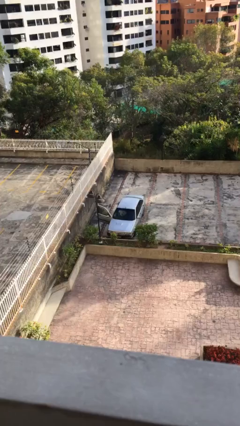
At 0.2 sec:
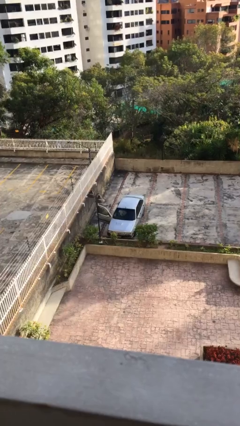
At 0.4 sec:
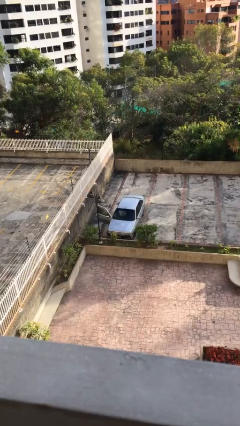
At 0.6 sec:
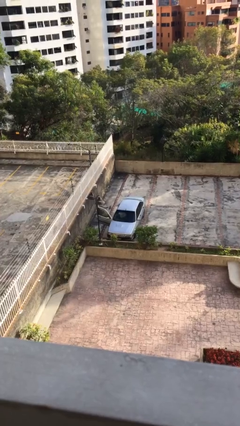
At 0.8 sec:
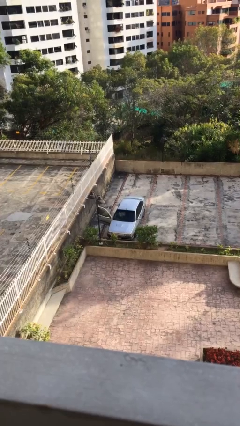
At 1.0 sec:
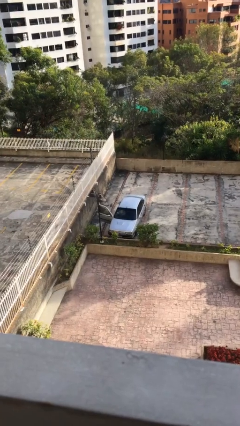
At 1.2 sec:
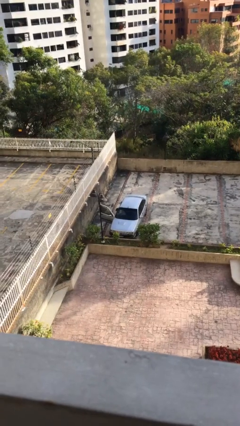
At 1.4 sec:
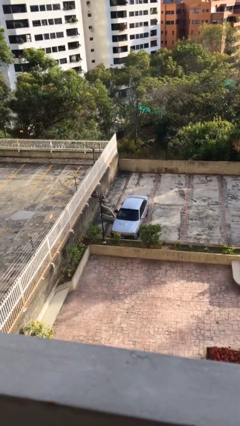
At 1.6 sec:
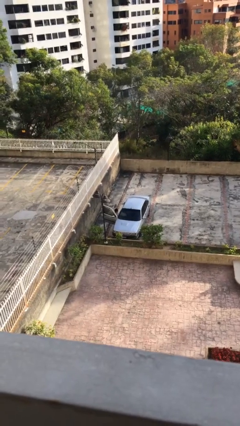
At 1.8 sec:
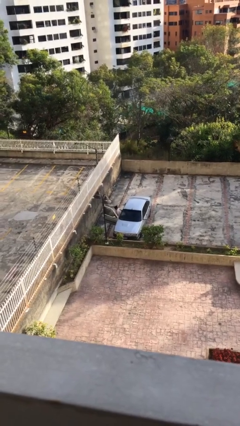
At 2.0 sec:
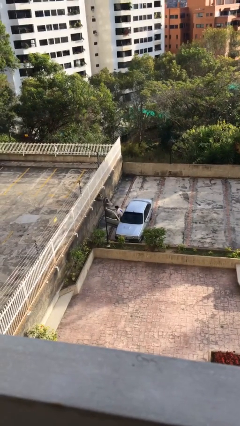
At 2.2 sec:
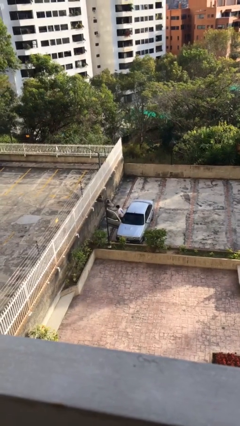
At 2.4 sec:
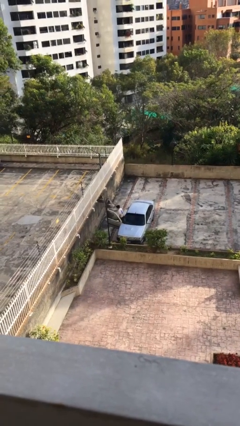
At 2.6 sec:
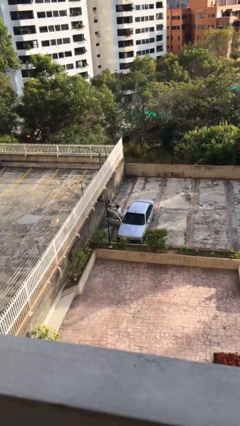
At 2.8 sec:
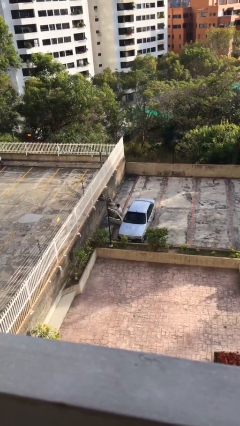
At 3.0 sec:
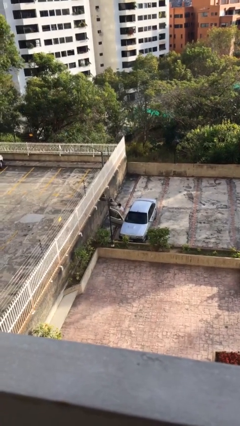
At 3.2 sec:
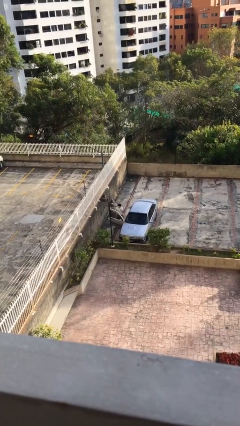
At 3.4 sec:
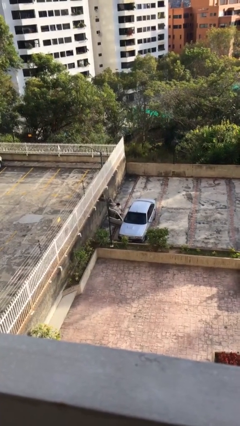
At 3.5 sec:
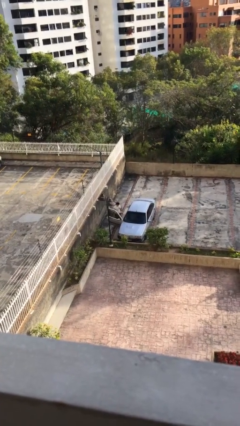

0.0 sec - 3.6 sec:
person exits car

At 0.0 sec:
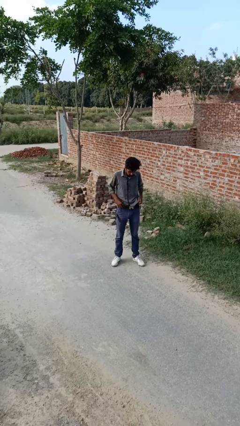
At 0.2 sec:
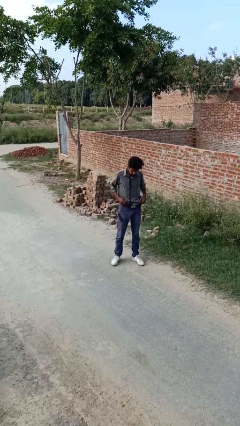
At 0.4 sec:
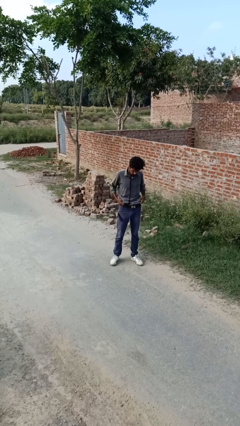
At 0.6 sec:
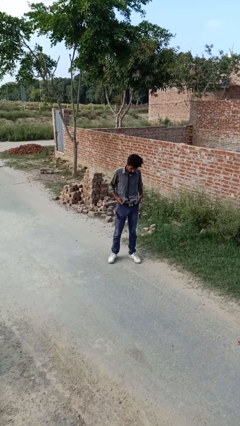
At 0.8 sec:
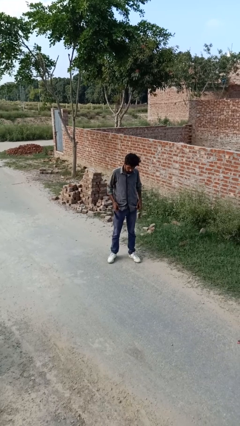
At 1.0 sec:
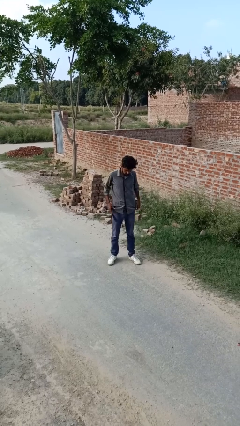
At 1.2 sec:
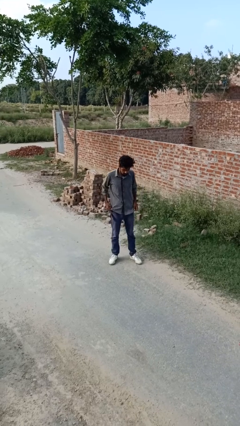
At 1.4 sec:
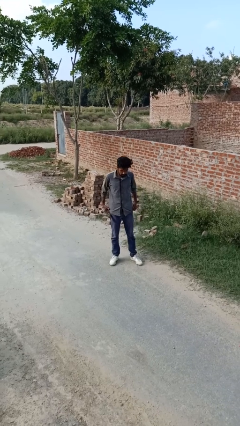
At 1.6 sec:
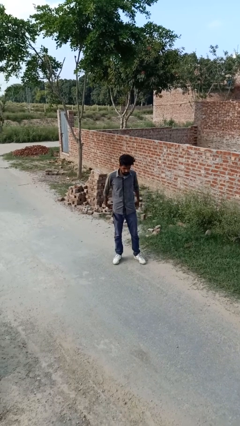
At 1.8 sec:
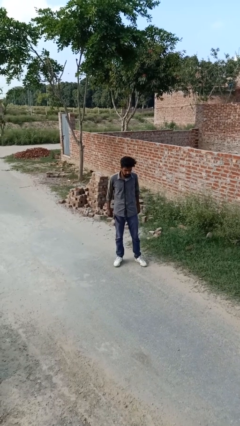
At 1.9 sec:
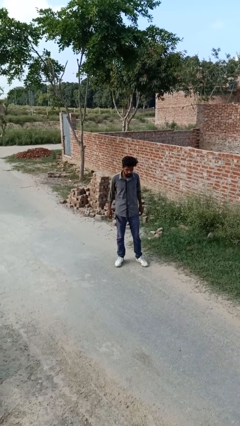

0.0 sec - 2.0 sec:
person untucks shirt

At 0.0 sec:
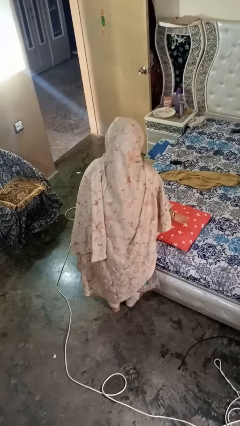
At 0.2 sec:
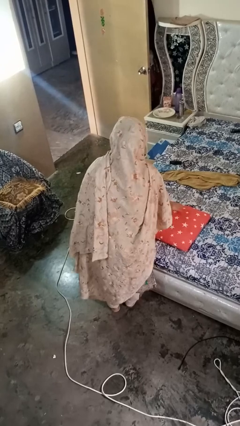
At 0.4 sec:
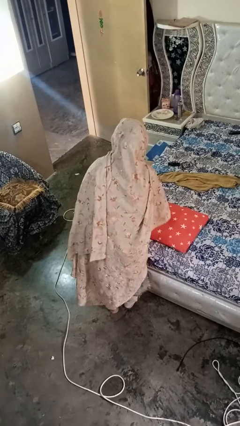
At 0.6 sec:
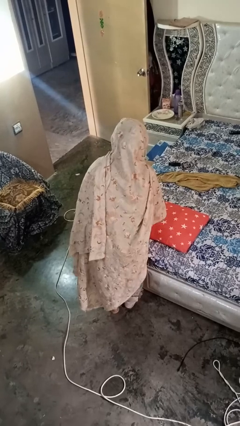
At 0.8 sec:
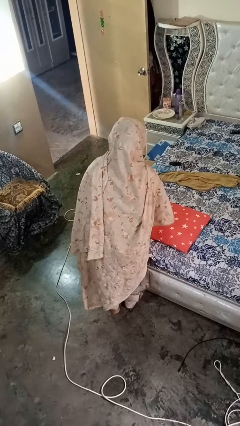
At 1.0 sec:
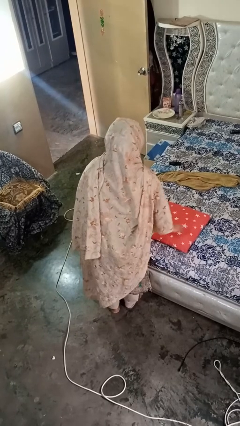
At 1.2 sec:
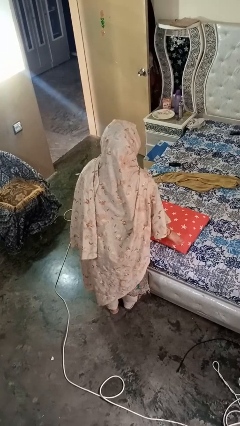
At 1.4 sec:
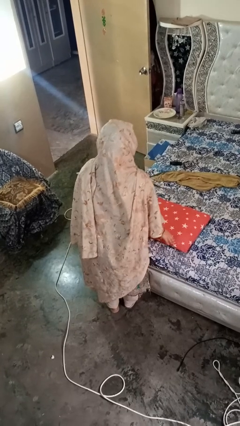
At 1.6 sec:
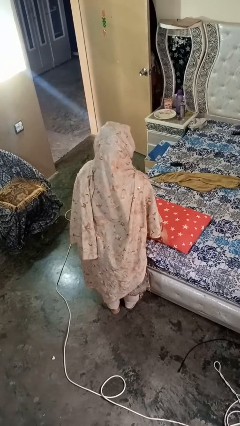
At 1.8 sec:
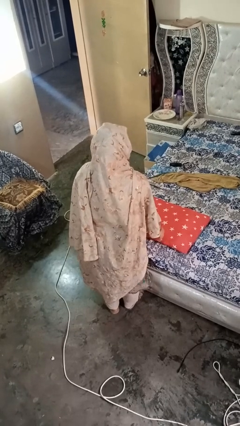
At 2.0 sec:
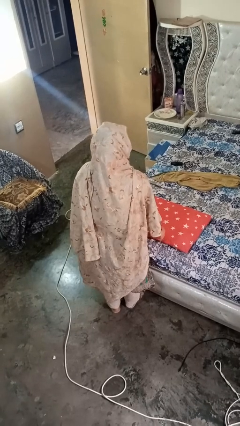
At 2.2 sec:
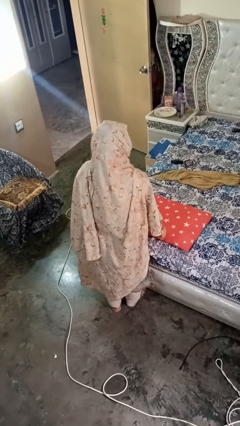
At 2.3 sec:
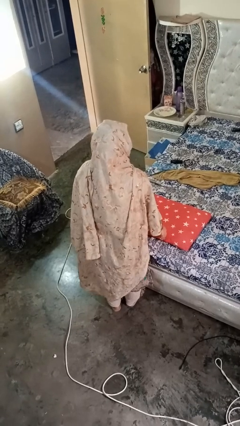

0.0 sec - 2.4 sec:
person waves hand over object

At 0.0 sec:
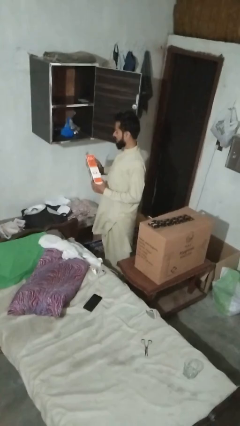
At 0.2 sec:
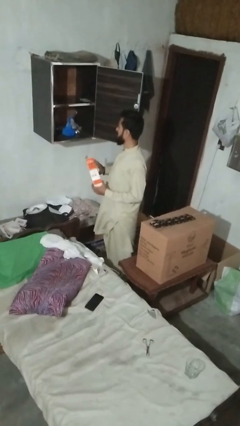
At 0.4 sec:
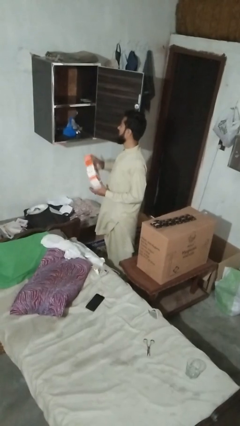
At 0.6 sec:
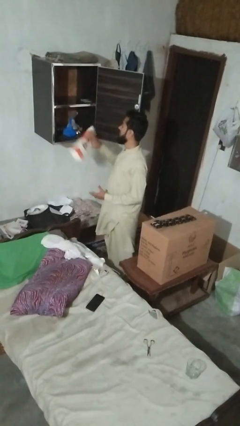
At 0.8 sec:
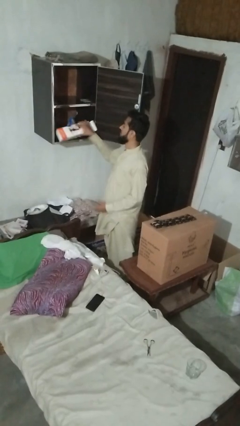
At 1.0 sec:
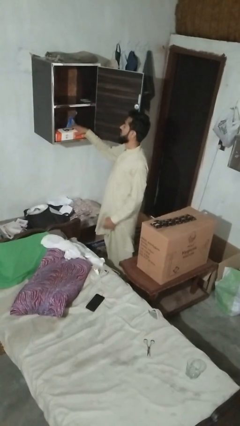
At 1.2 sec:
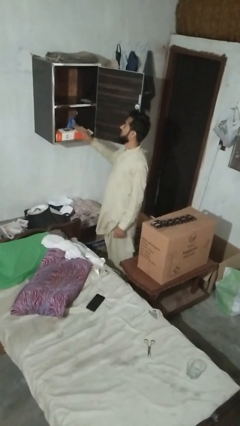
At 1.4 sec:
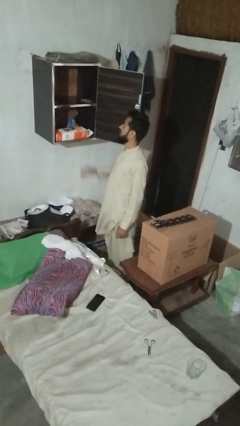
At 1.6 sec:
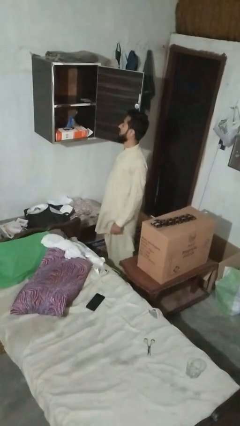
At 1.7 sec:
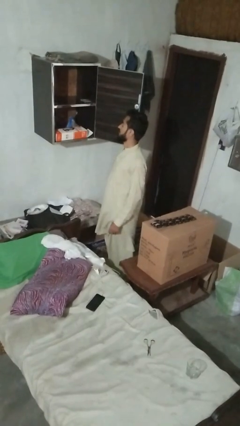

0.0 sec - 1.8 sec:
person puts down object into cabinet

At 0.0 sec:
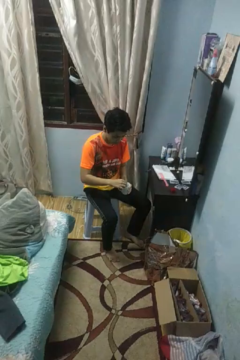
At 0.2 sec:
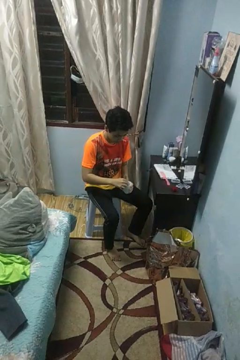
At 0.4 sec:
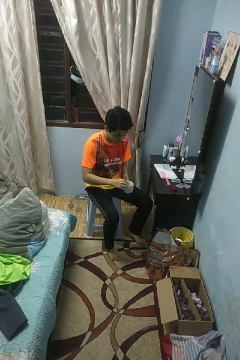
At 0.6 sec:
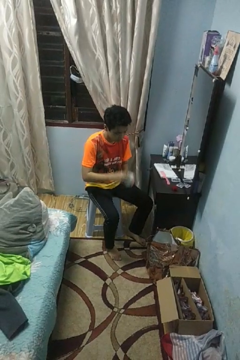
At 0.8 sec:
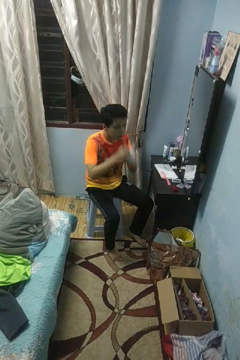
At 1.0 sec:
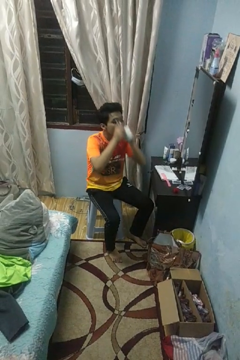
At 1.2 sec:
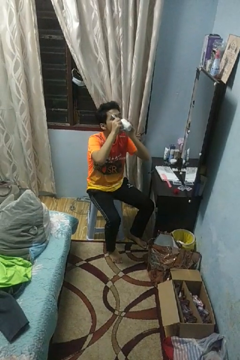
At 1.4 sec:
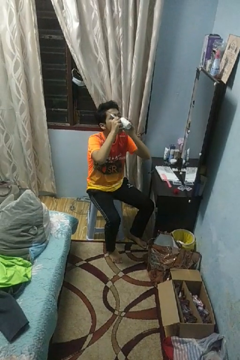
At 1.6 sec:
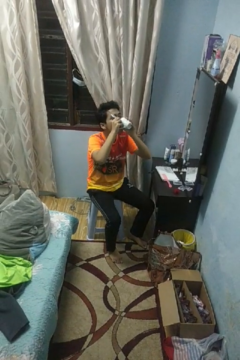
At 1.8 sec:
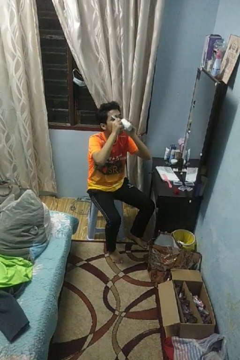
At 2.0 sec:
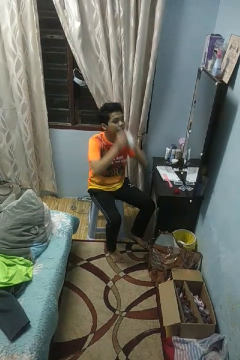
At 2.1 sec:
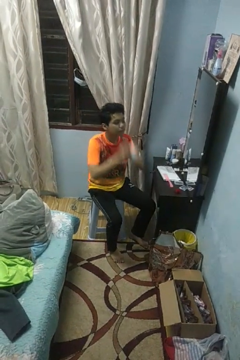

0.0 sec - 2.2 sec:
person drinks from mug

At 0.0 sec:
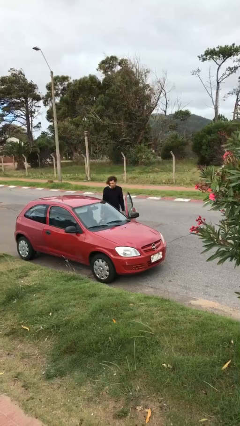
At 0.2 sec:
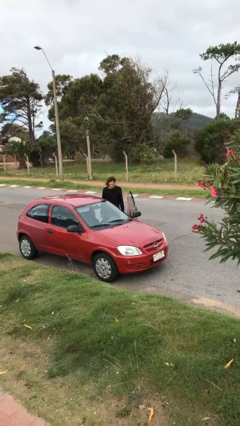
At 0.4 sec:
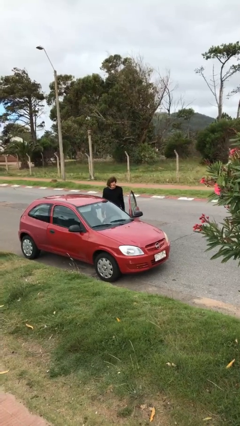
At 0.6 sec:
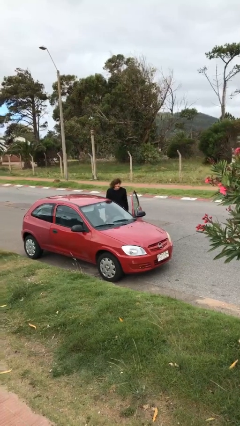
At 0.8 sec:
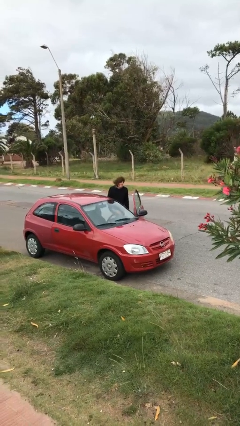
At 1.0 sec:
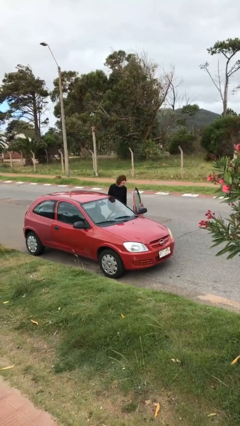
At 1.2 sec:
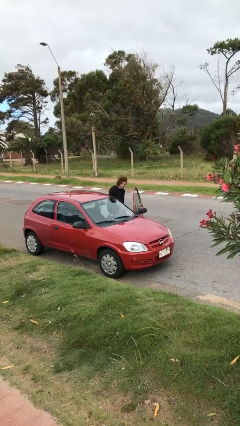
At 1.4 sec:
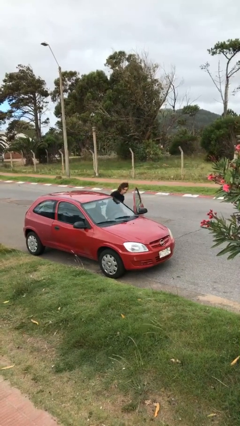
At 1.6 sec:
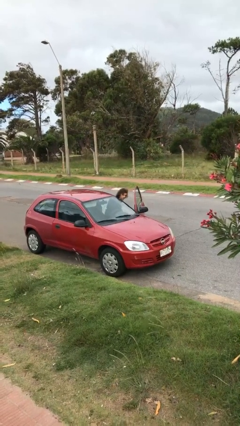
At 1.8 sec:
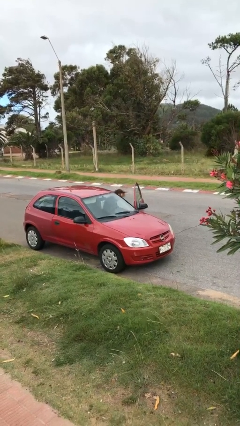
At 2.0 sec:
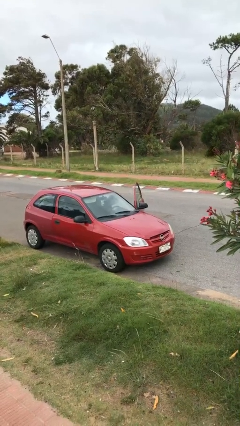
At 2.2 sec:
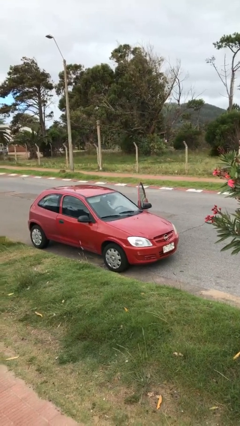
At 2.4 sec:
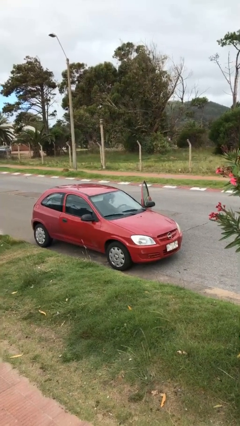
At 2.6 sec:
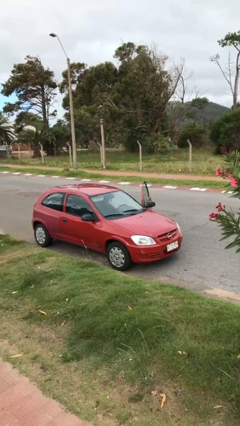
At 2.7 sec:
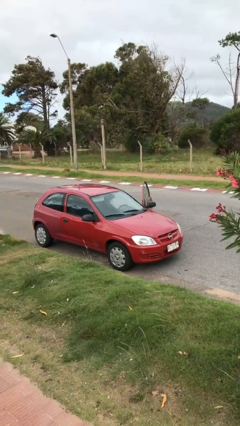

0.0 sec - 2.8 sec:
person enters car

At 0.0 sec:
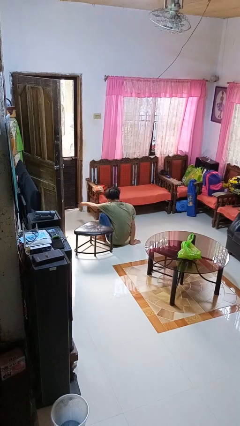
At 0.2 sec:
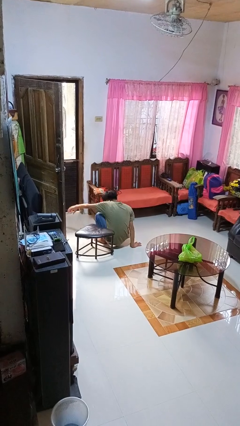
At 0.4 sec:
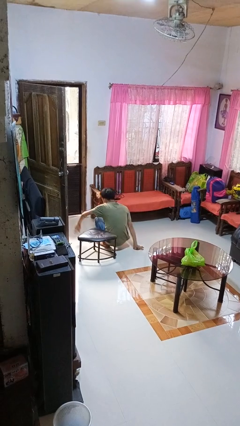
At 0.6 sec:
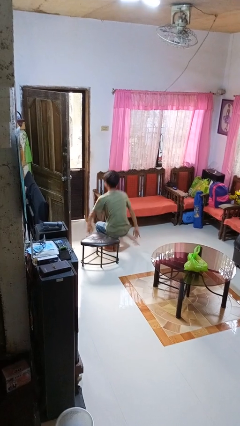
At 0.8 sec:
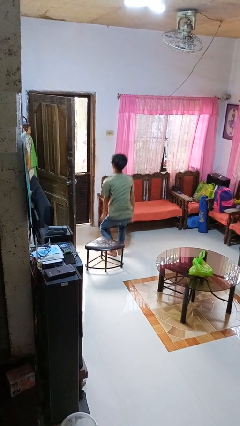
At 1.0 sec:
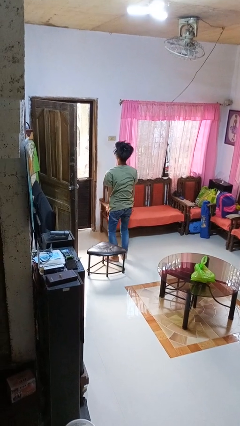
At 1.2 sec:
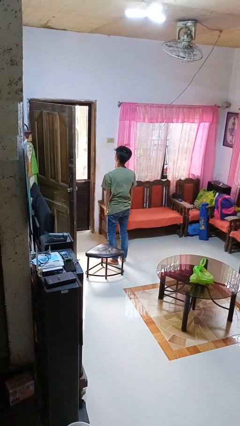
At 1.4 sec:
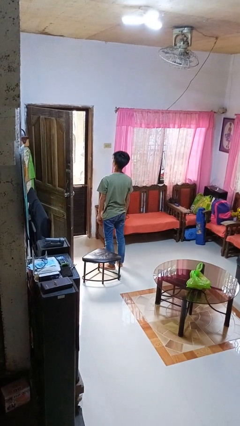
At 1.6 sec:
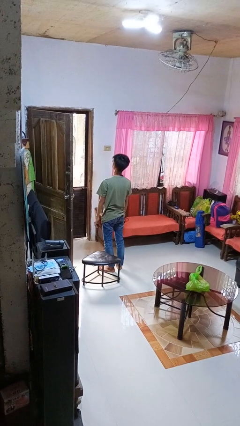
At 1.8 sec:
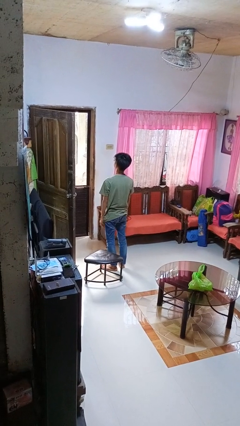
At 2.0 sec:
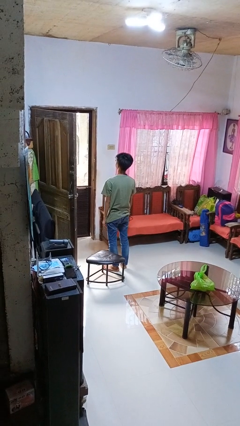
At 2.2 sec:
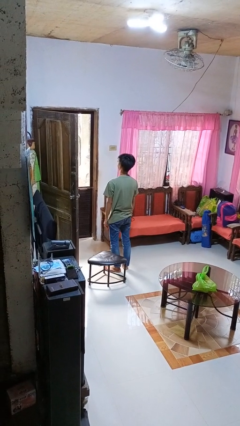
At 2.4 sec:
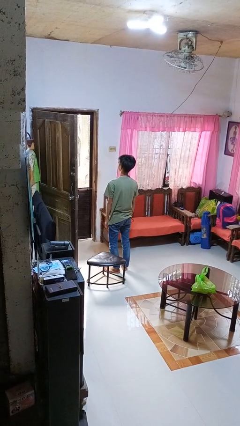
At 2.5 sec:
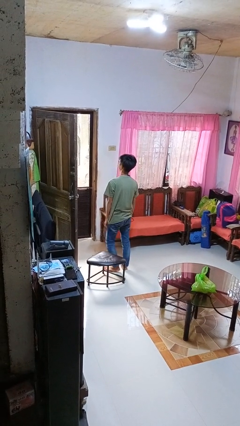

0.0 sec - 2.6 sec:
person stands up from floor
